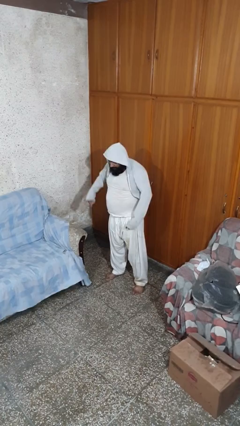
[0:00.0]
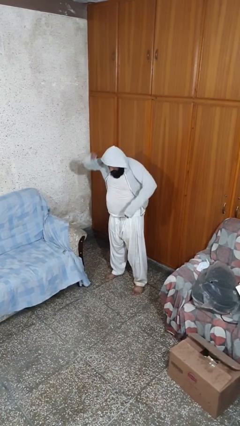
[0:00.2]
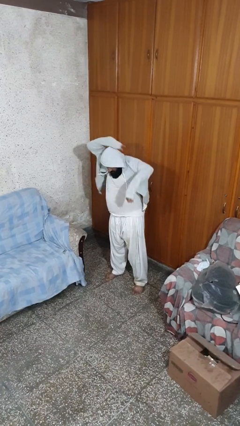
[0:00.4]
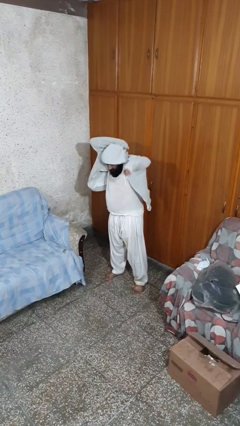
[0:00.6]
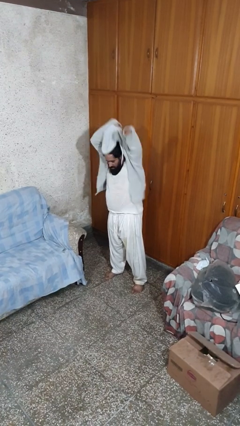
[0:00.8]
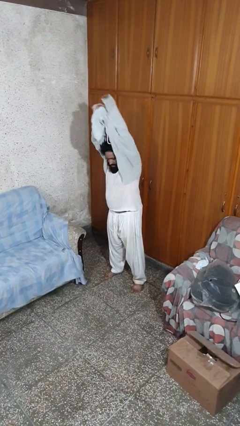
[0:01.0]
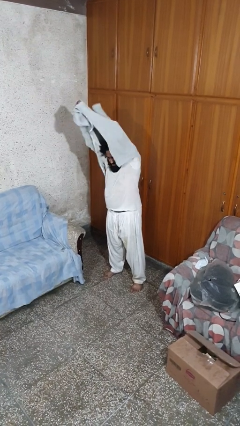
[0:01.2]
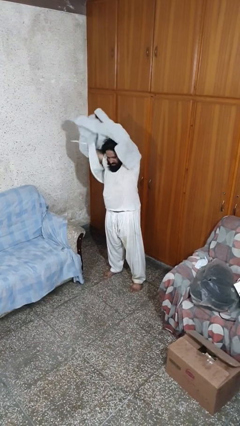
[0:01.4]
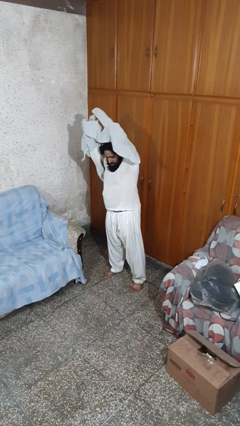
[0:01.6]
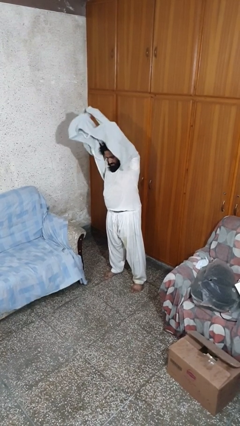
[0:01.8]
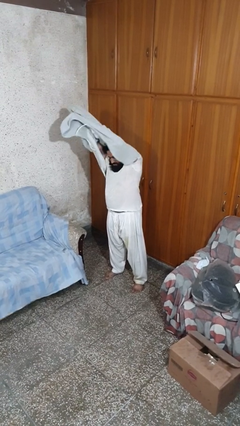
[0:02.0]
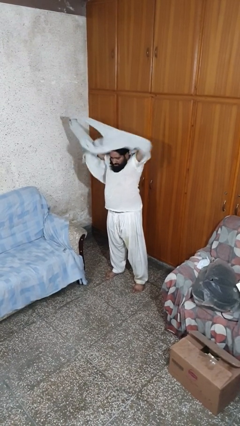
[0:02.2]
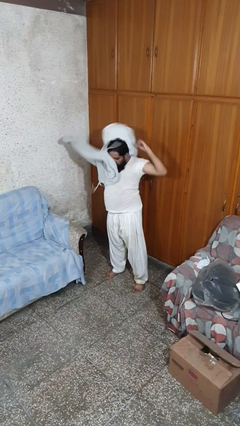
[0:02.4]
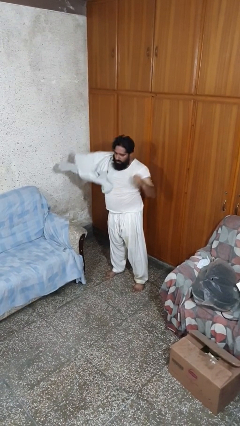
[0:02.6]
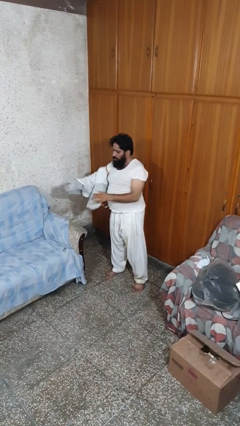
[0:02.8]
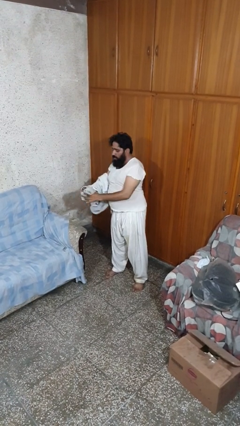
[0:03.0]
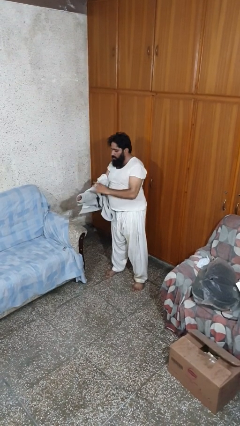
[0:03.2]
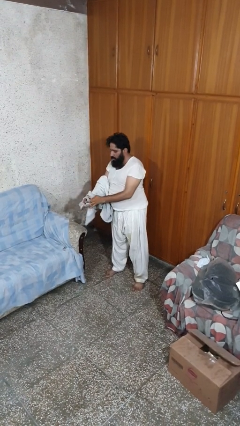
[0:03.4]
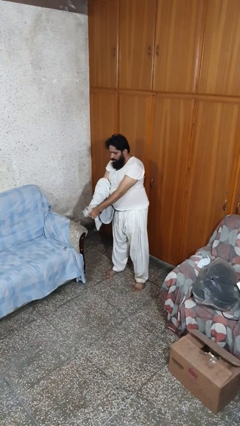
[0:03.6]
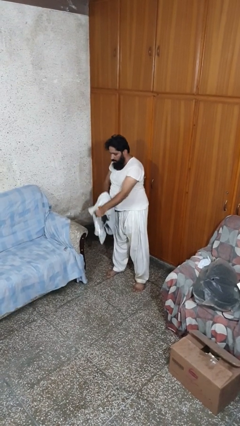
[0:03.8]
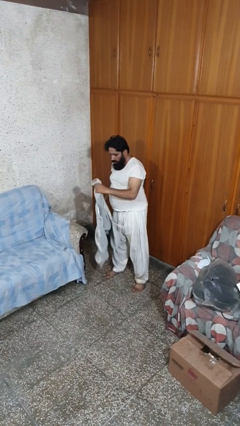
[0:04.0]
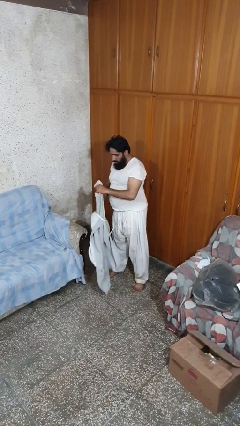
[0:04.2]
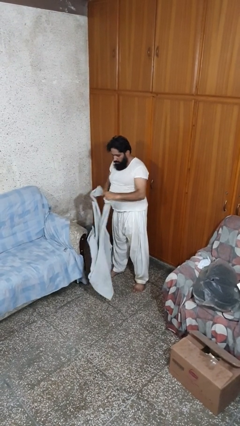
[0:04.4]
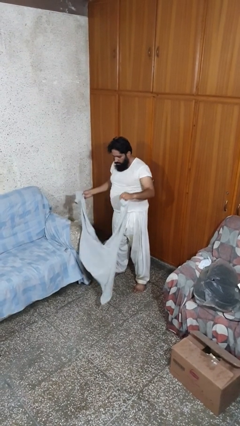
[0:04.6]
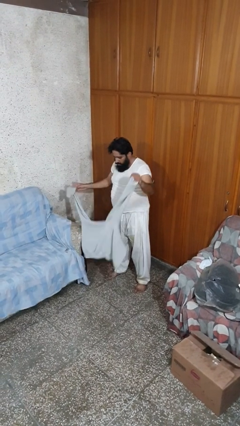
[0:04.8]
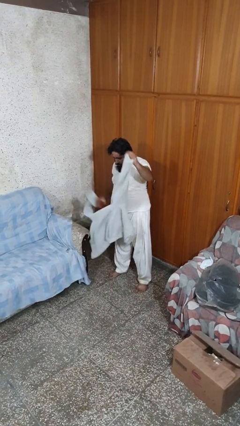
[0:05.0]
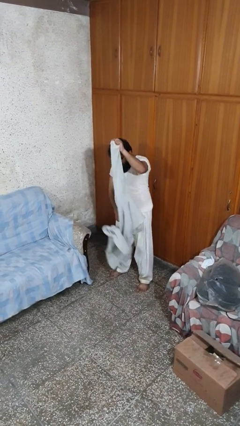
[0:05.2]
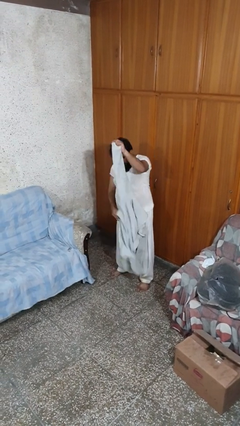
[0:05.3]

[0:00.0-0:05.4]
person takes off hoodie

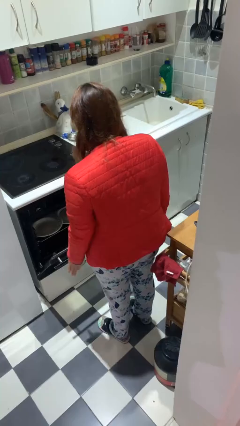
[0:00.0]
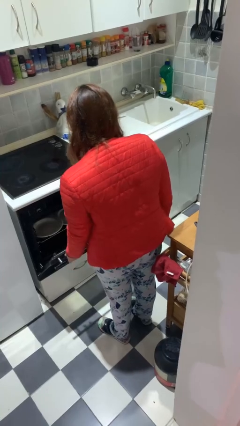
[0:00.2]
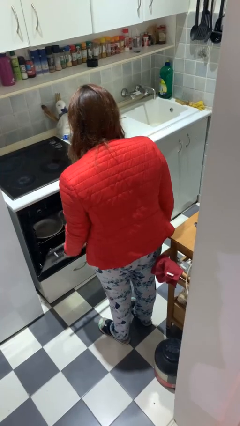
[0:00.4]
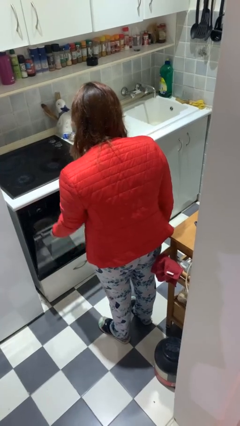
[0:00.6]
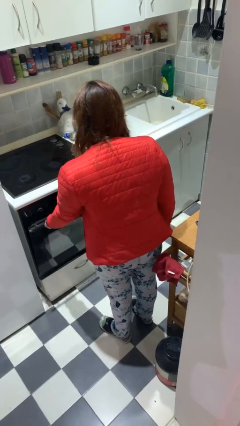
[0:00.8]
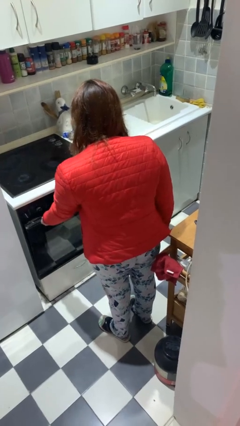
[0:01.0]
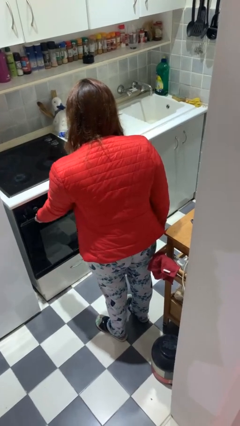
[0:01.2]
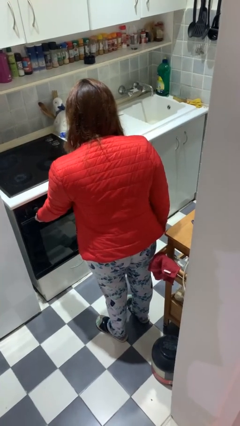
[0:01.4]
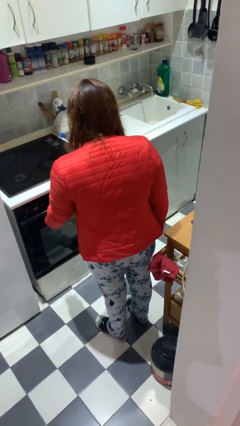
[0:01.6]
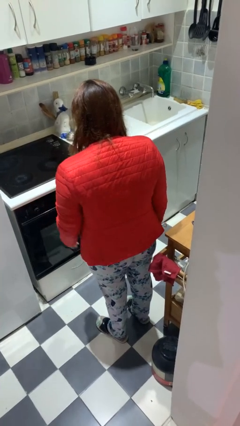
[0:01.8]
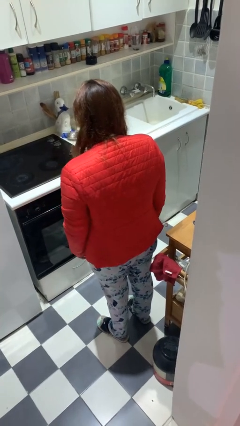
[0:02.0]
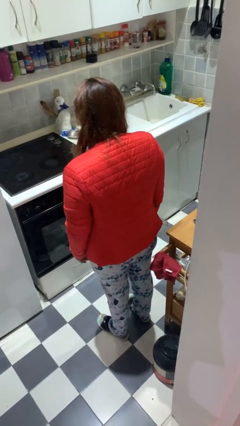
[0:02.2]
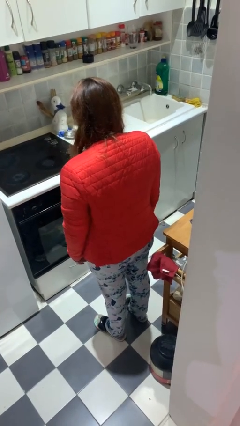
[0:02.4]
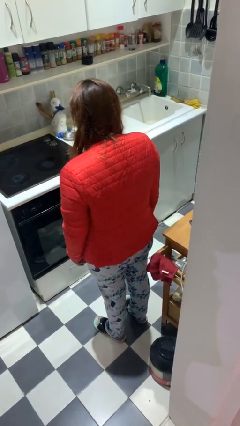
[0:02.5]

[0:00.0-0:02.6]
person closes dishwasher

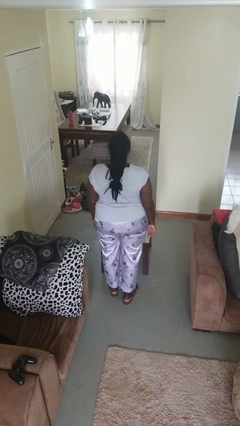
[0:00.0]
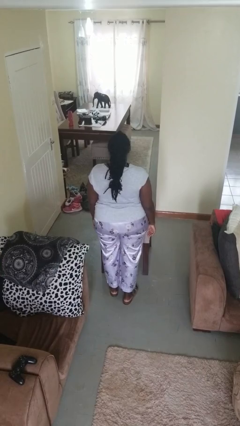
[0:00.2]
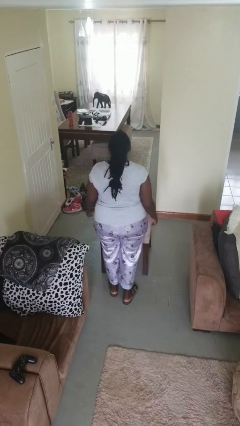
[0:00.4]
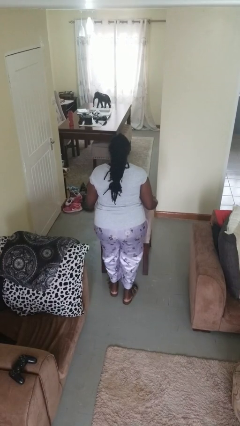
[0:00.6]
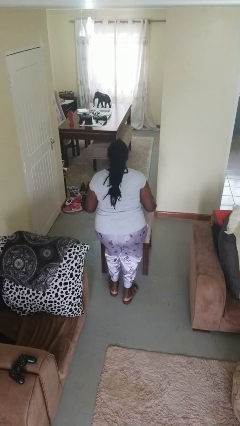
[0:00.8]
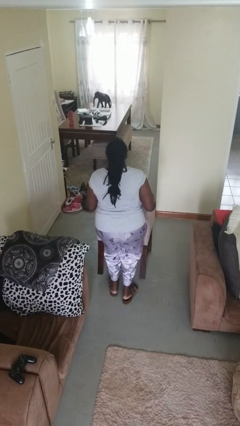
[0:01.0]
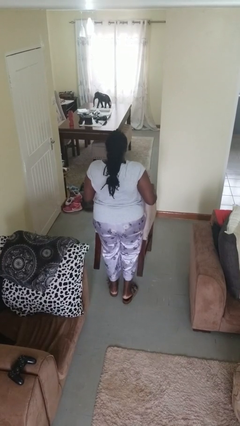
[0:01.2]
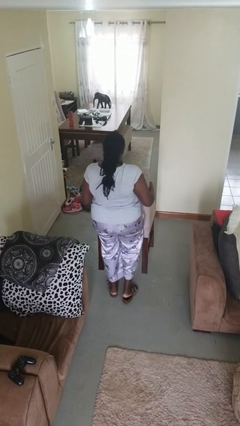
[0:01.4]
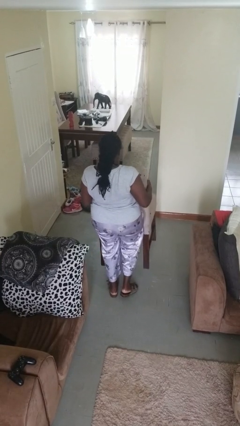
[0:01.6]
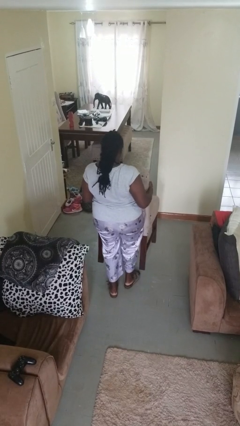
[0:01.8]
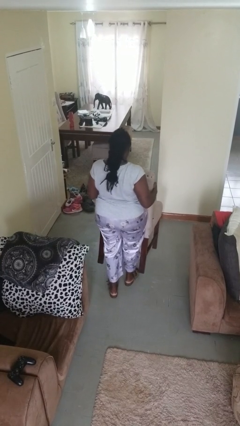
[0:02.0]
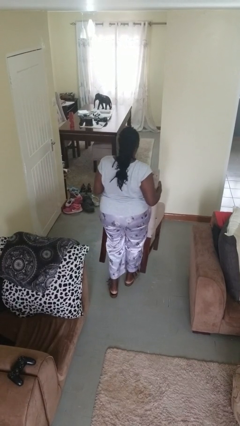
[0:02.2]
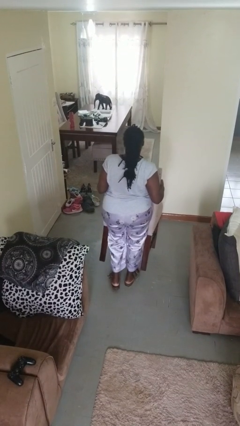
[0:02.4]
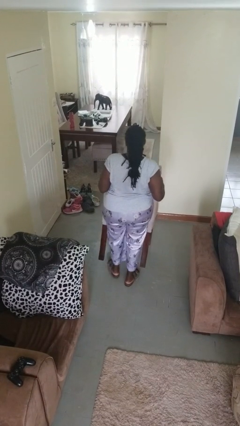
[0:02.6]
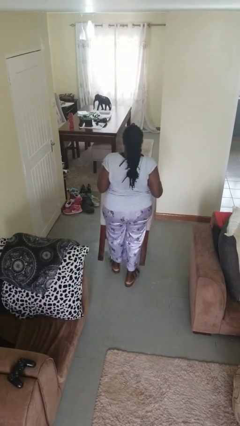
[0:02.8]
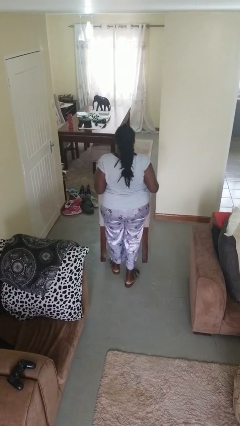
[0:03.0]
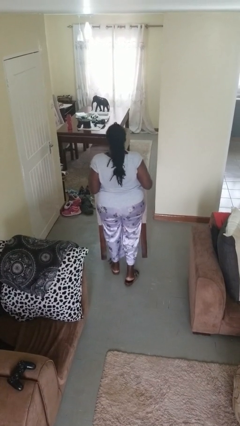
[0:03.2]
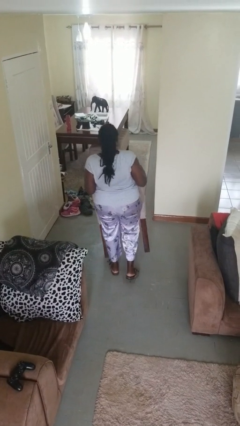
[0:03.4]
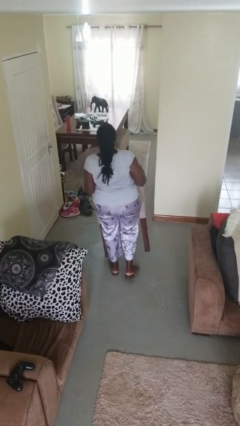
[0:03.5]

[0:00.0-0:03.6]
person carries furniture

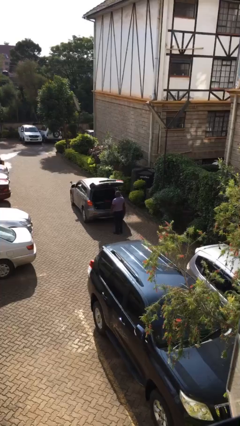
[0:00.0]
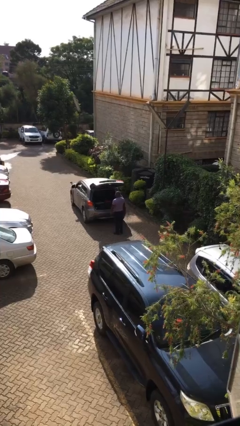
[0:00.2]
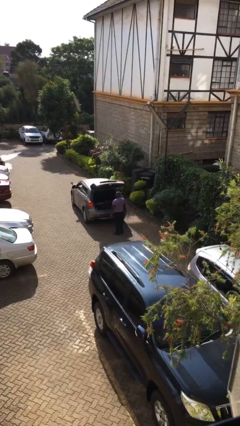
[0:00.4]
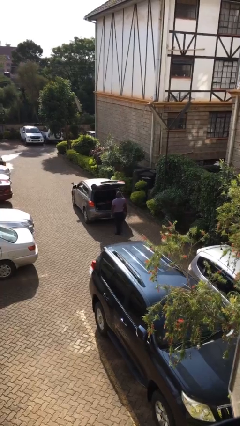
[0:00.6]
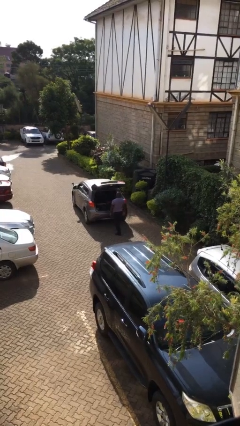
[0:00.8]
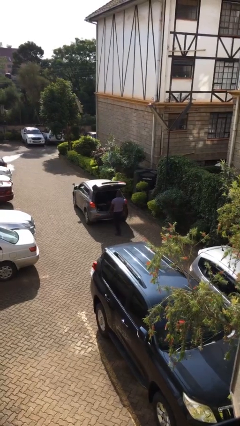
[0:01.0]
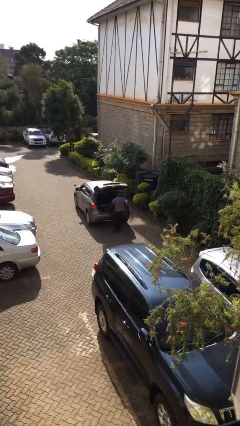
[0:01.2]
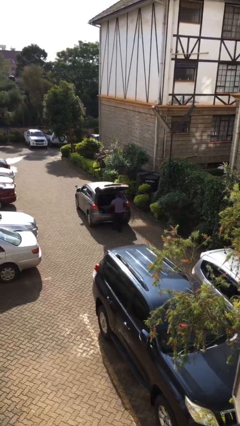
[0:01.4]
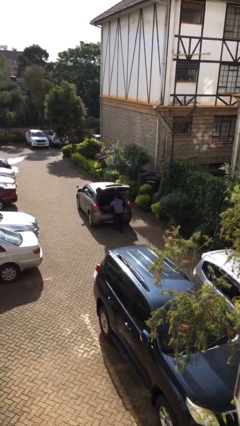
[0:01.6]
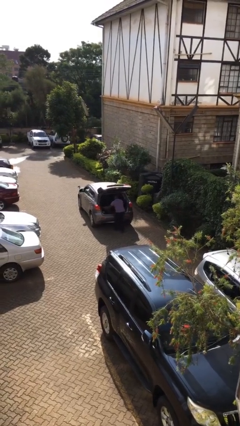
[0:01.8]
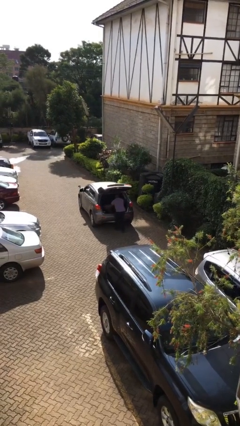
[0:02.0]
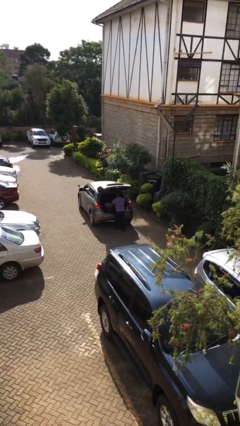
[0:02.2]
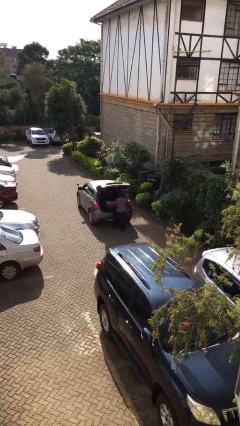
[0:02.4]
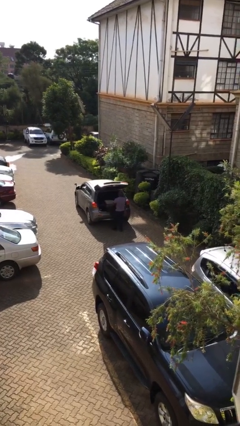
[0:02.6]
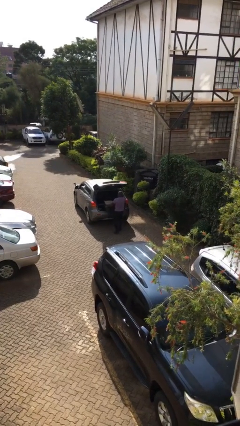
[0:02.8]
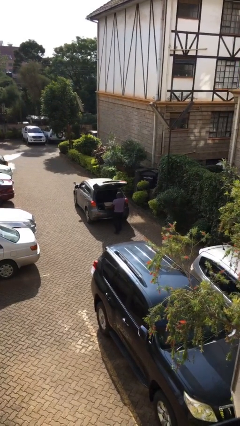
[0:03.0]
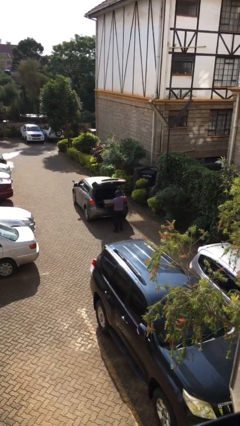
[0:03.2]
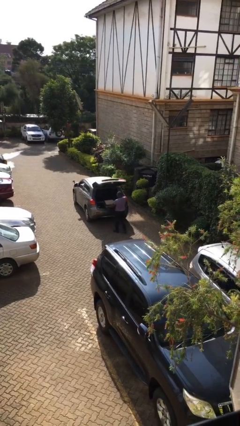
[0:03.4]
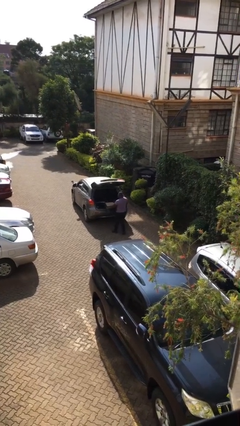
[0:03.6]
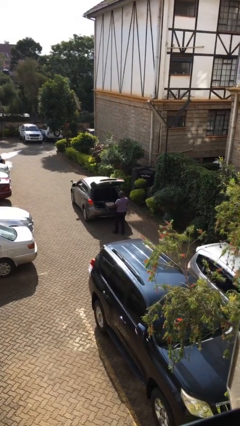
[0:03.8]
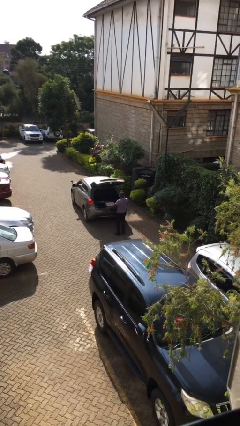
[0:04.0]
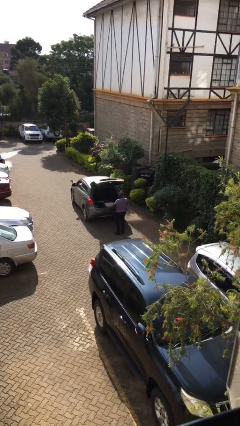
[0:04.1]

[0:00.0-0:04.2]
person unloads car

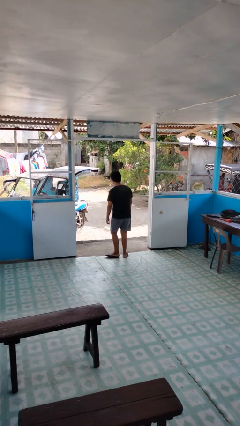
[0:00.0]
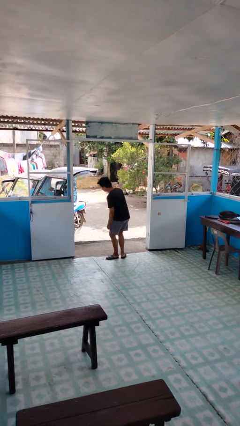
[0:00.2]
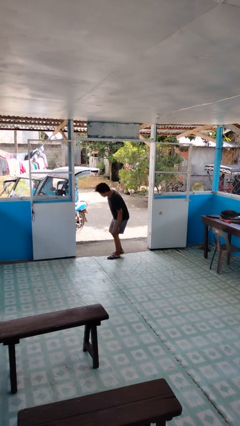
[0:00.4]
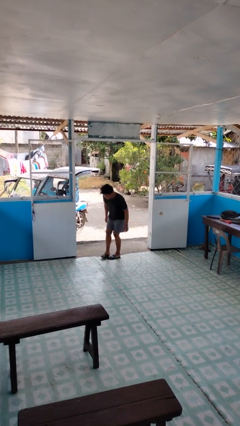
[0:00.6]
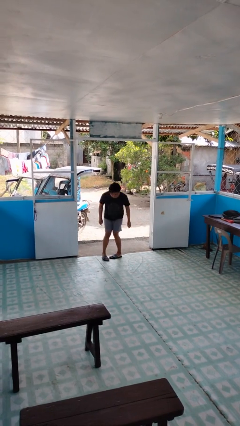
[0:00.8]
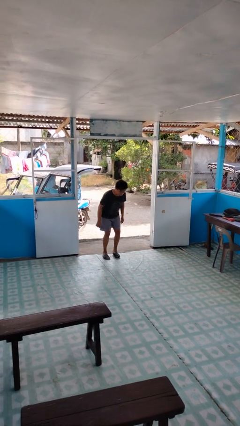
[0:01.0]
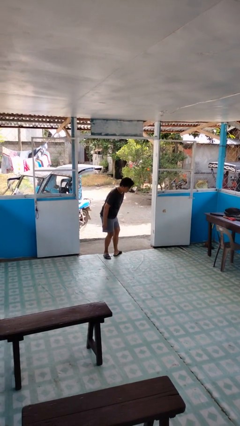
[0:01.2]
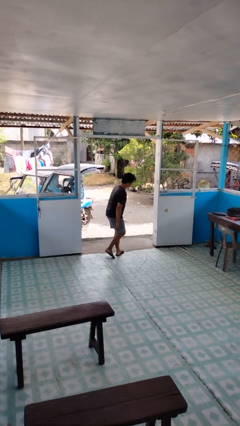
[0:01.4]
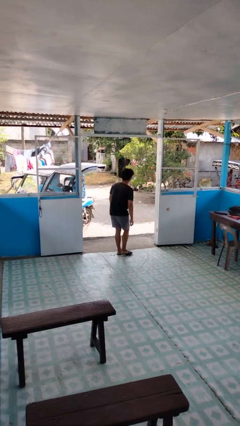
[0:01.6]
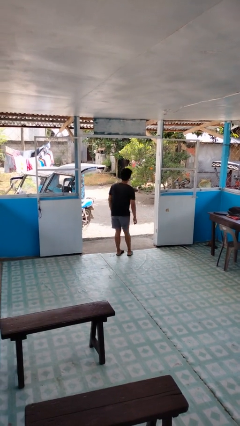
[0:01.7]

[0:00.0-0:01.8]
person twirls
